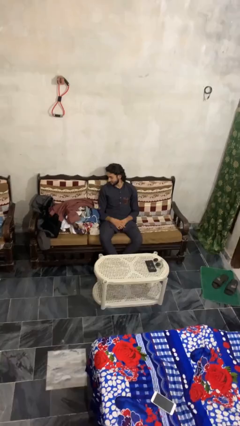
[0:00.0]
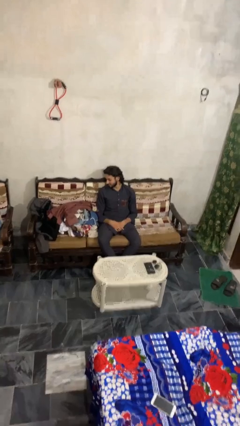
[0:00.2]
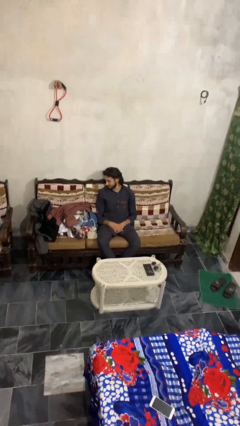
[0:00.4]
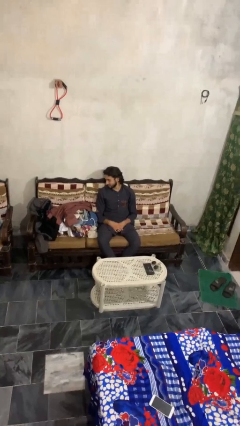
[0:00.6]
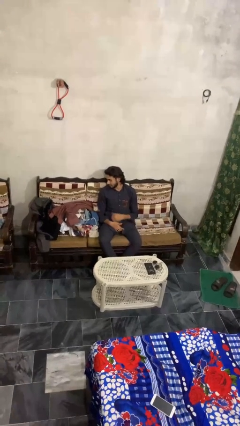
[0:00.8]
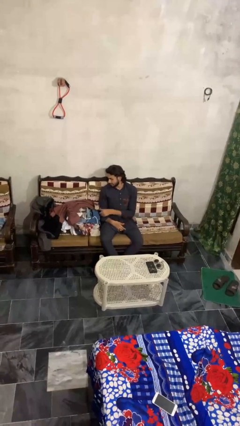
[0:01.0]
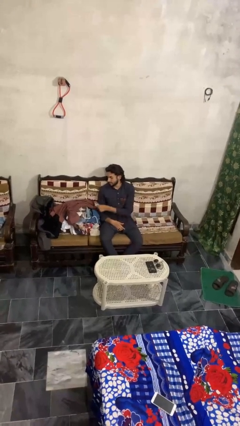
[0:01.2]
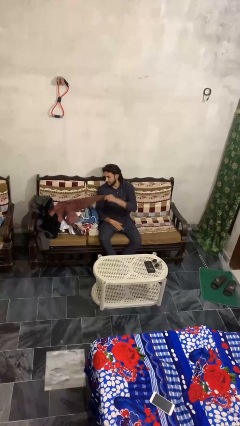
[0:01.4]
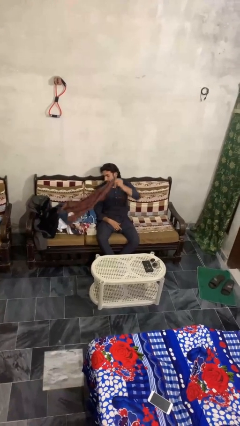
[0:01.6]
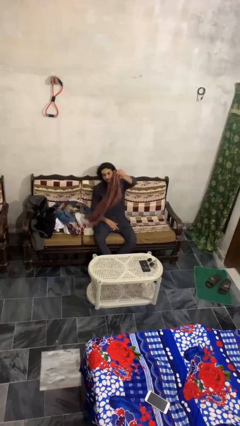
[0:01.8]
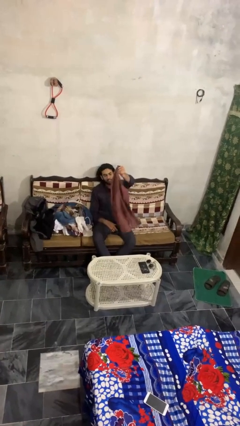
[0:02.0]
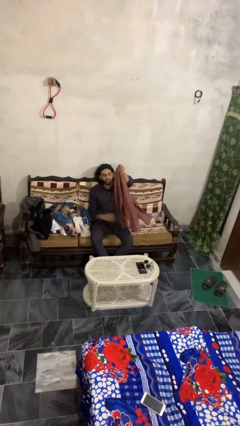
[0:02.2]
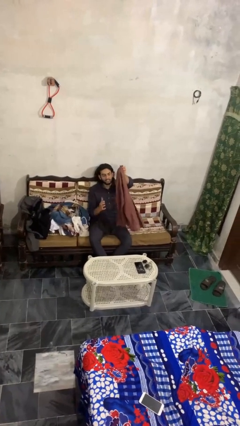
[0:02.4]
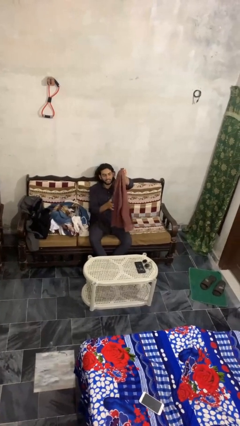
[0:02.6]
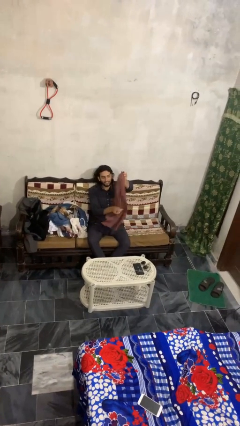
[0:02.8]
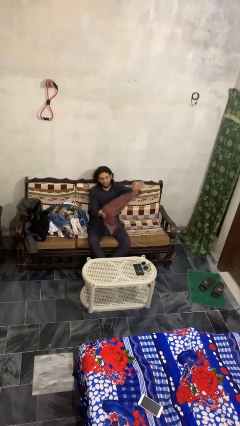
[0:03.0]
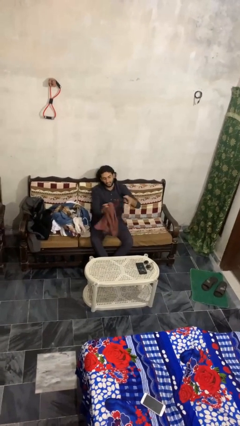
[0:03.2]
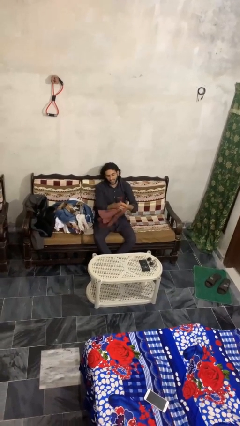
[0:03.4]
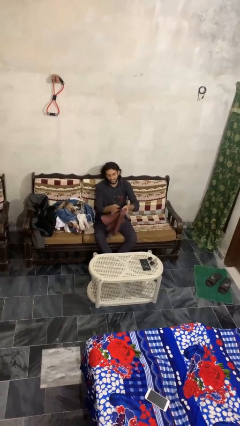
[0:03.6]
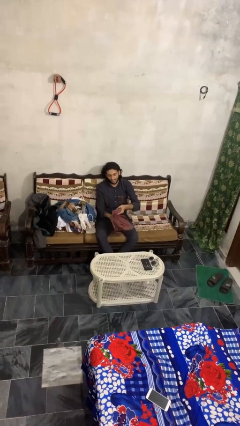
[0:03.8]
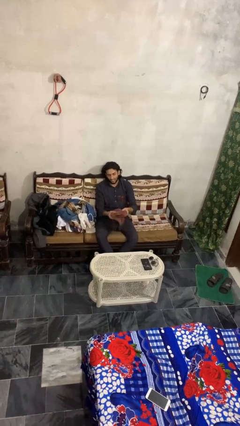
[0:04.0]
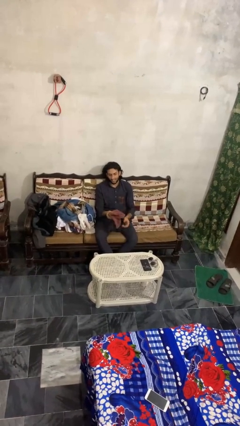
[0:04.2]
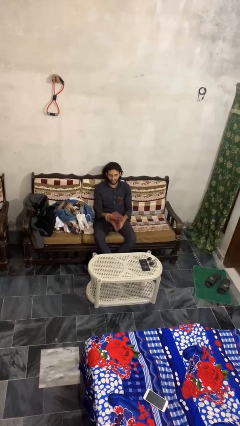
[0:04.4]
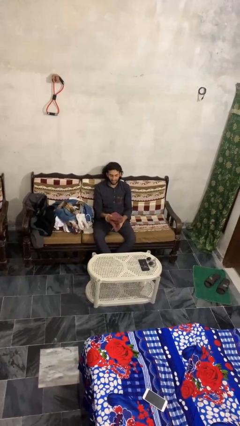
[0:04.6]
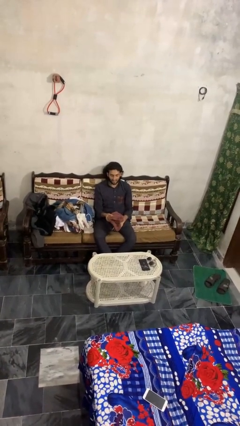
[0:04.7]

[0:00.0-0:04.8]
person folds shirt

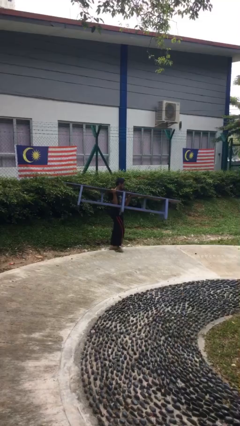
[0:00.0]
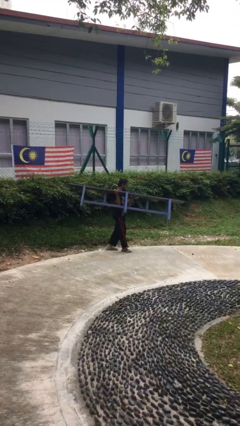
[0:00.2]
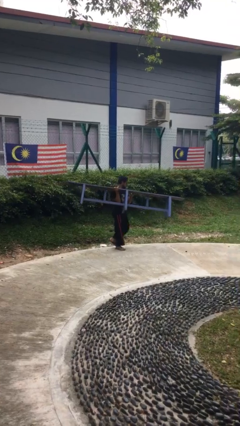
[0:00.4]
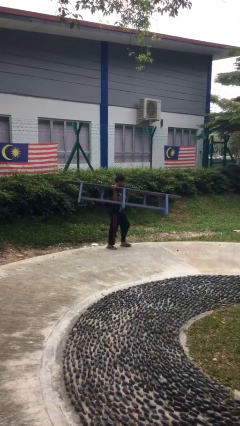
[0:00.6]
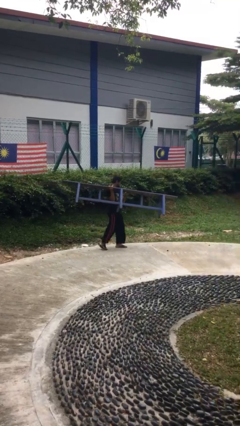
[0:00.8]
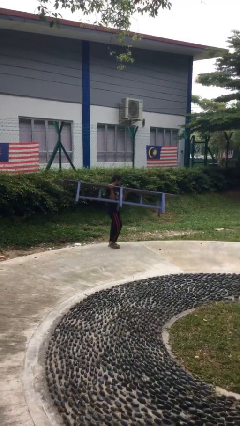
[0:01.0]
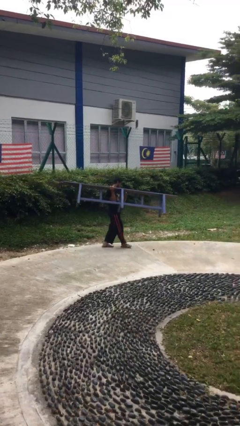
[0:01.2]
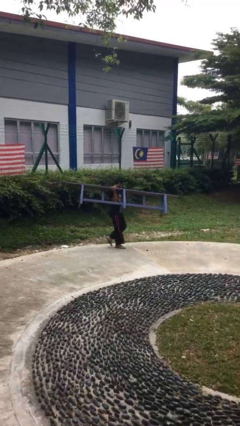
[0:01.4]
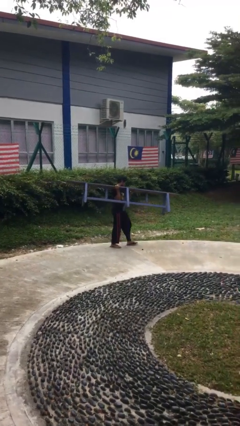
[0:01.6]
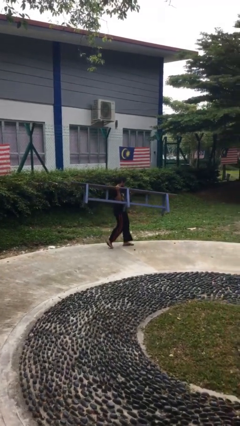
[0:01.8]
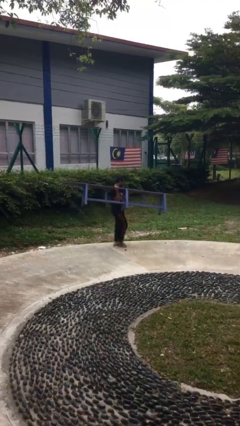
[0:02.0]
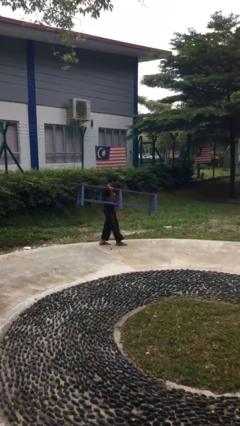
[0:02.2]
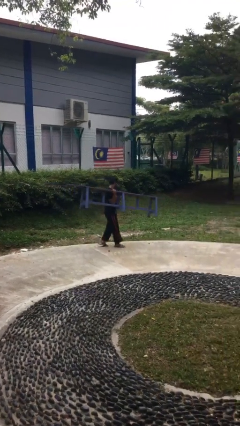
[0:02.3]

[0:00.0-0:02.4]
person carries heavy object

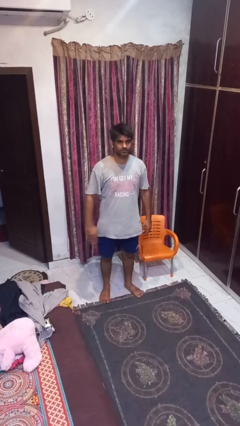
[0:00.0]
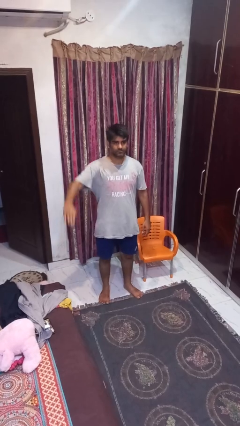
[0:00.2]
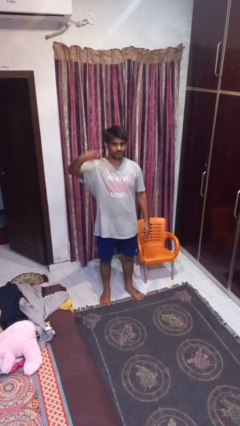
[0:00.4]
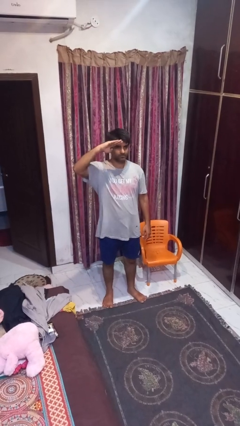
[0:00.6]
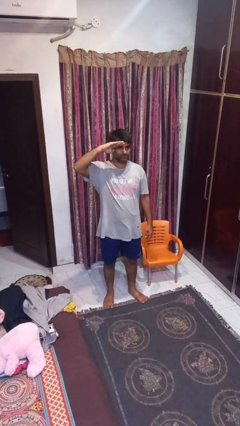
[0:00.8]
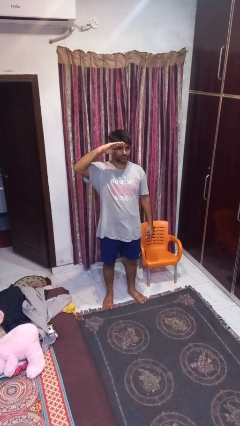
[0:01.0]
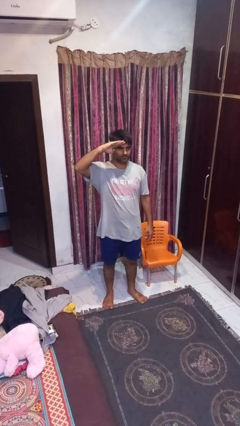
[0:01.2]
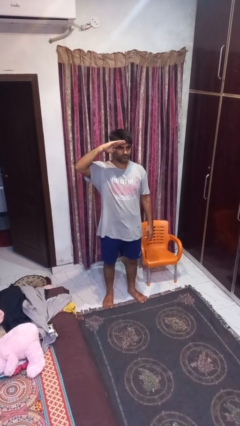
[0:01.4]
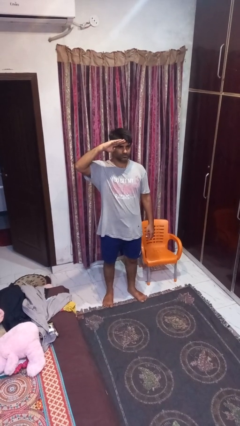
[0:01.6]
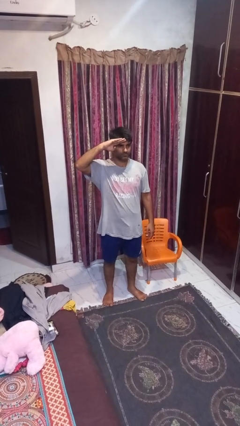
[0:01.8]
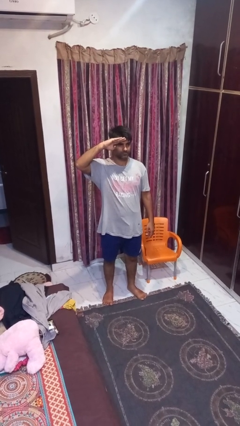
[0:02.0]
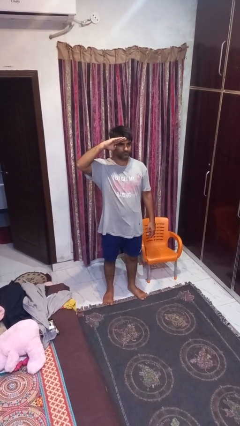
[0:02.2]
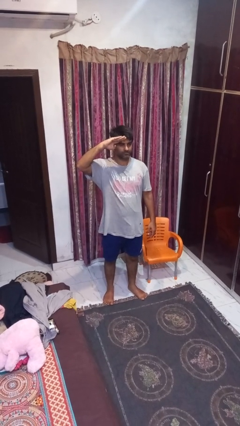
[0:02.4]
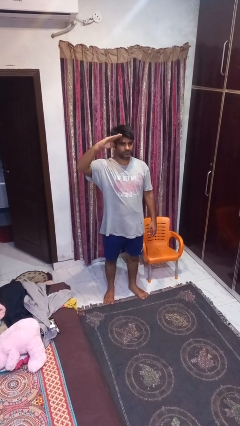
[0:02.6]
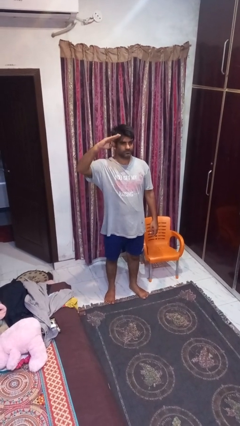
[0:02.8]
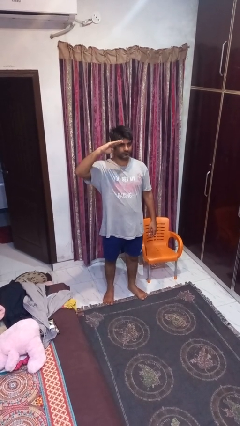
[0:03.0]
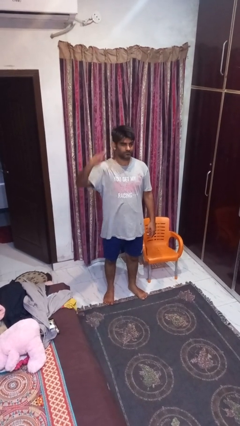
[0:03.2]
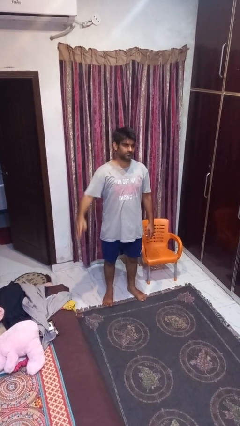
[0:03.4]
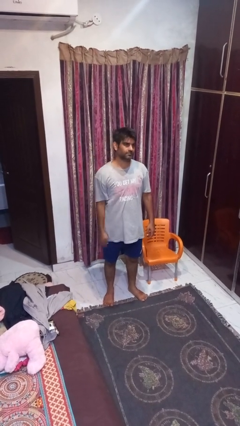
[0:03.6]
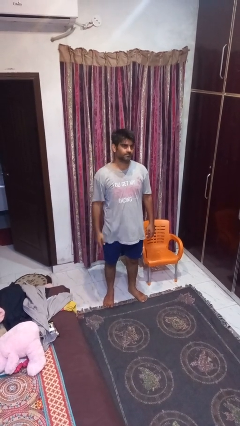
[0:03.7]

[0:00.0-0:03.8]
person salutes

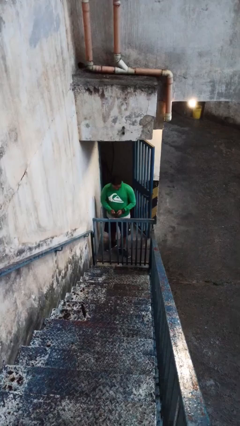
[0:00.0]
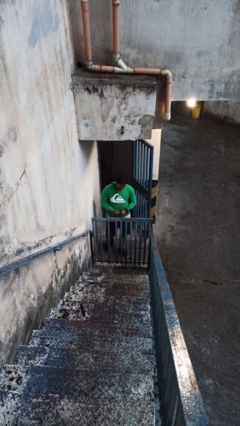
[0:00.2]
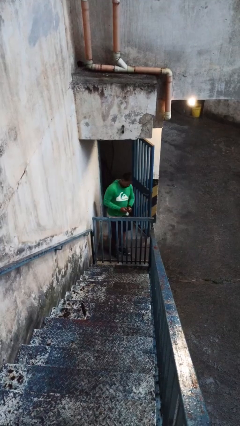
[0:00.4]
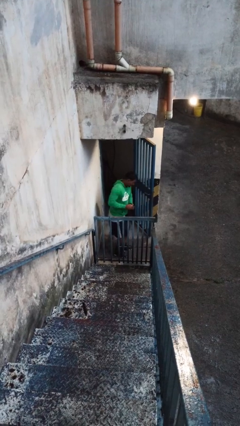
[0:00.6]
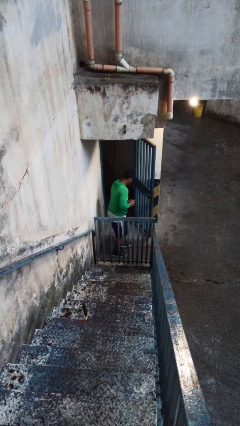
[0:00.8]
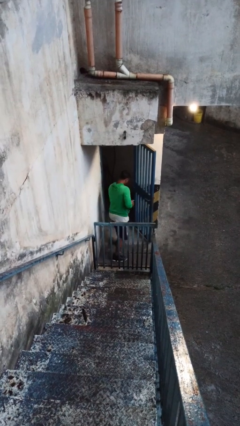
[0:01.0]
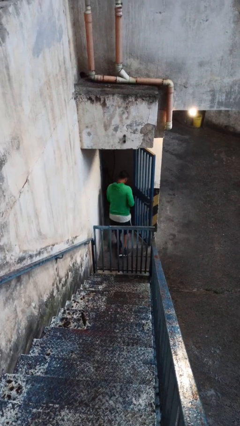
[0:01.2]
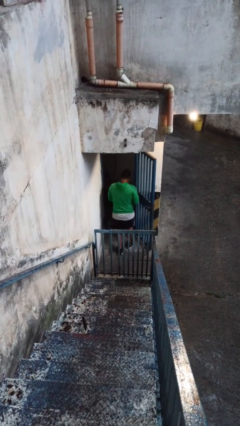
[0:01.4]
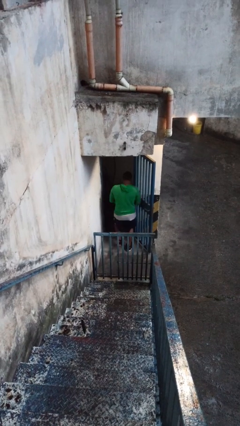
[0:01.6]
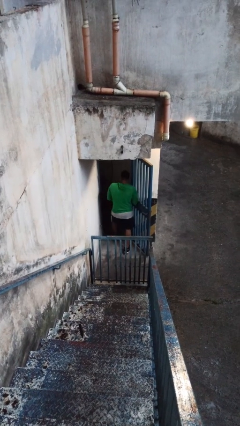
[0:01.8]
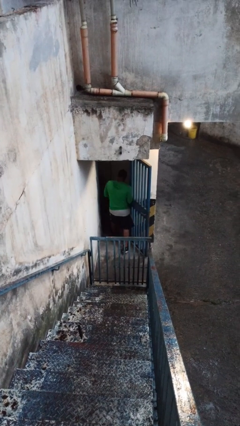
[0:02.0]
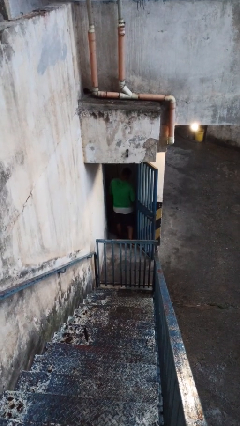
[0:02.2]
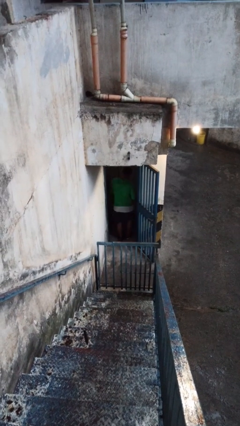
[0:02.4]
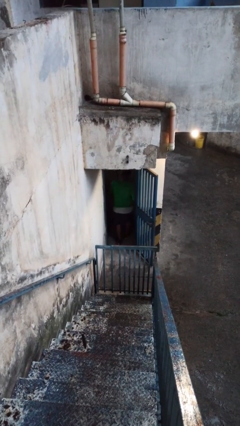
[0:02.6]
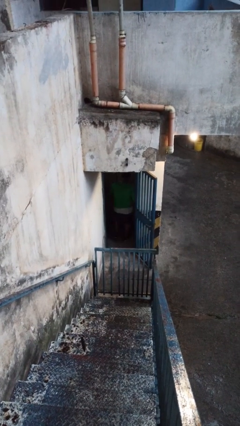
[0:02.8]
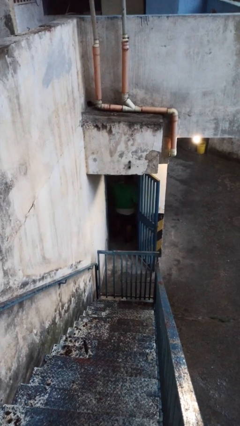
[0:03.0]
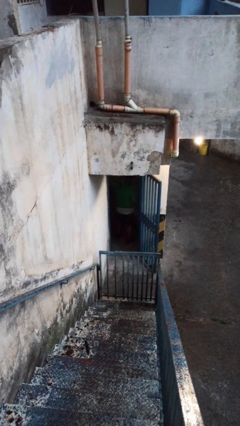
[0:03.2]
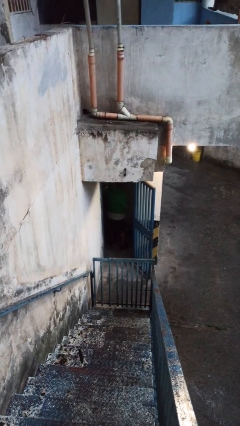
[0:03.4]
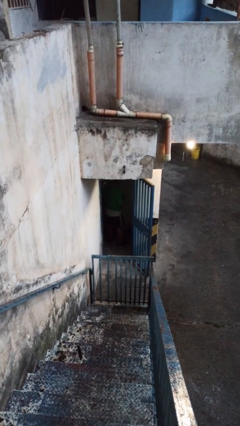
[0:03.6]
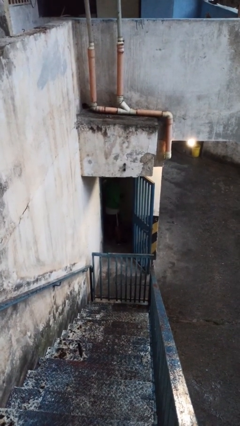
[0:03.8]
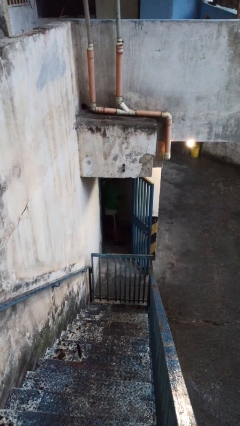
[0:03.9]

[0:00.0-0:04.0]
person exits scene through structure

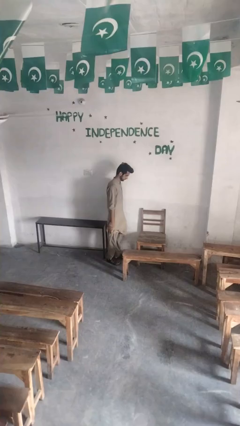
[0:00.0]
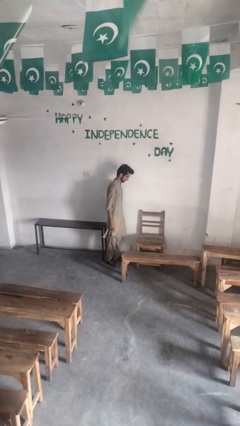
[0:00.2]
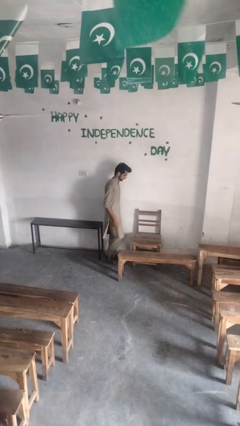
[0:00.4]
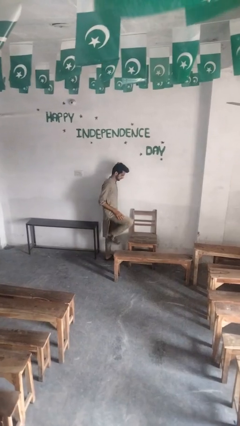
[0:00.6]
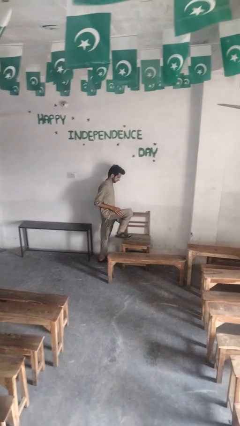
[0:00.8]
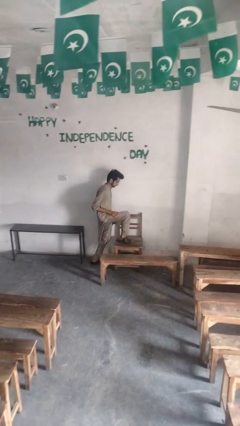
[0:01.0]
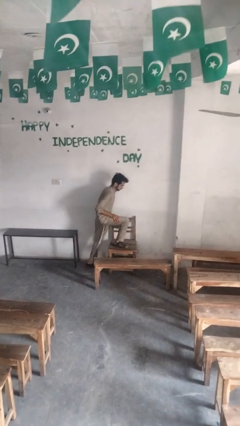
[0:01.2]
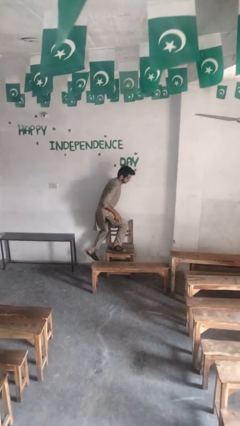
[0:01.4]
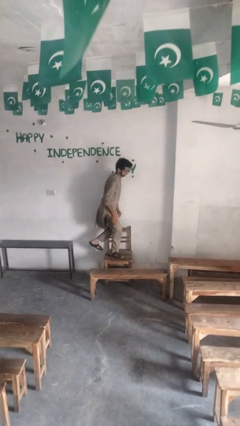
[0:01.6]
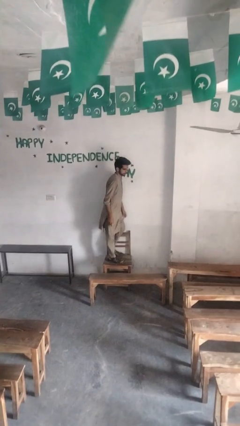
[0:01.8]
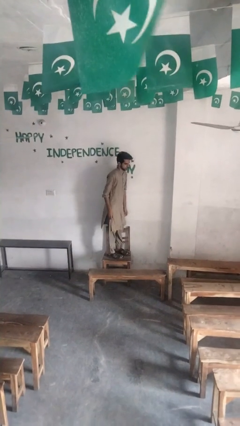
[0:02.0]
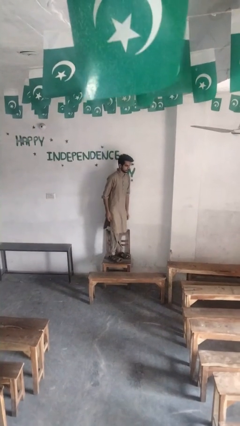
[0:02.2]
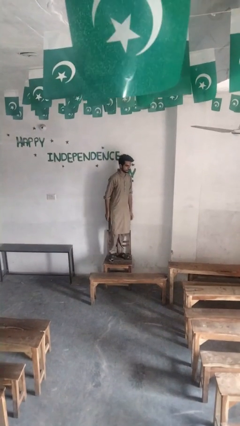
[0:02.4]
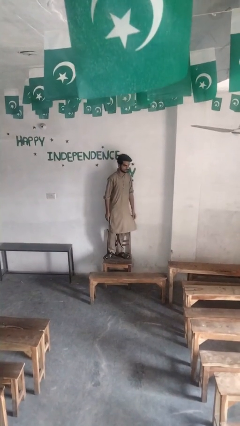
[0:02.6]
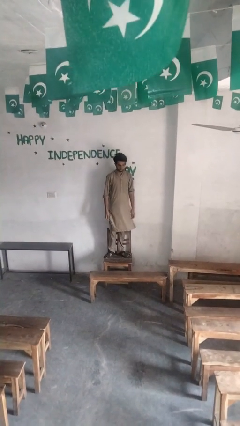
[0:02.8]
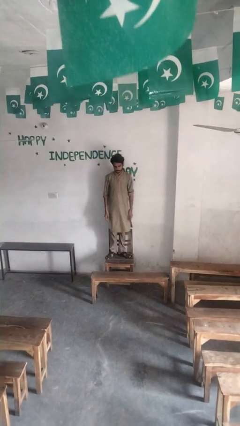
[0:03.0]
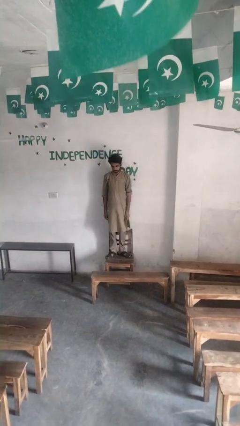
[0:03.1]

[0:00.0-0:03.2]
person climbs on chair
